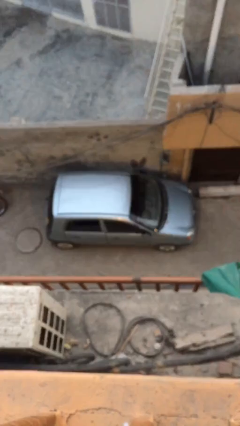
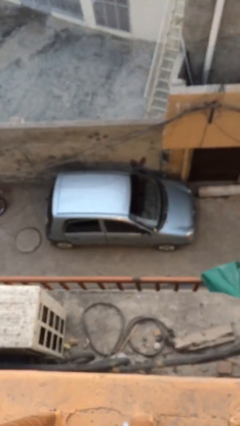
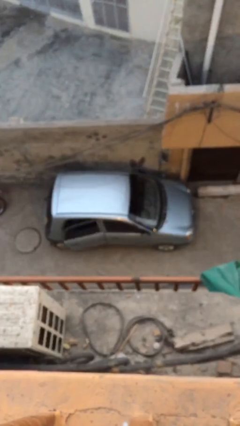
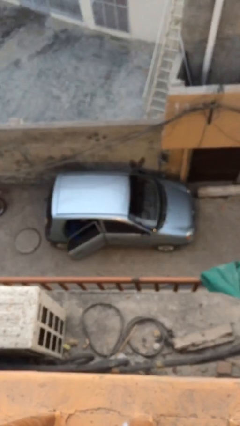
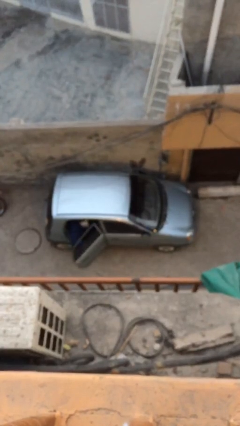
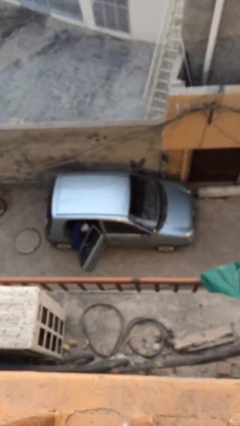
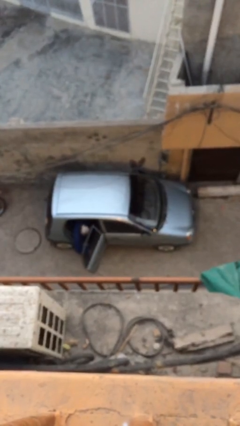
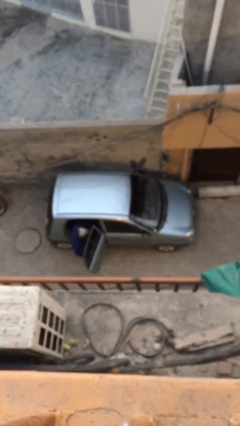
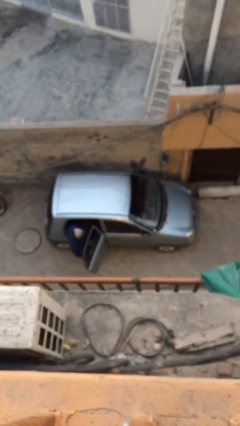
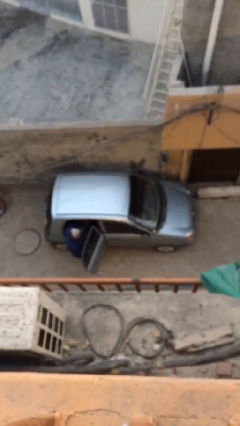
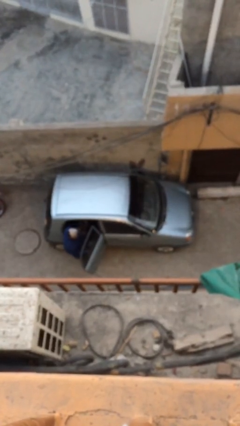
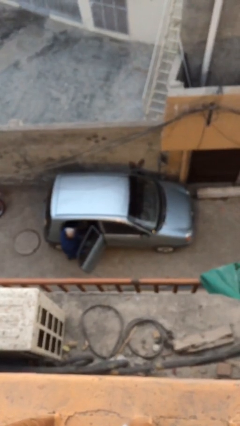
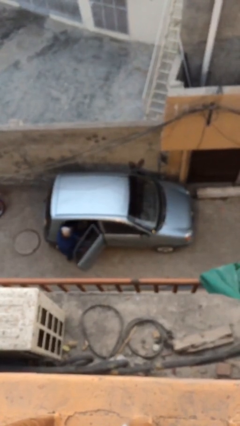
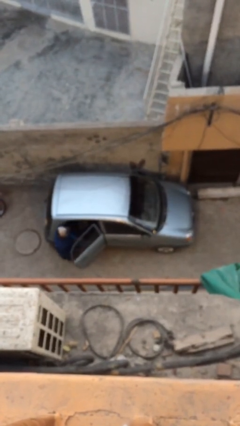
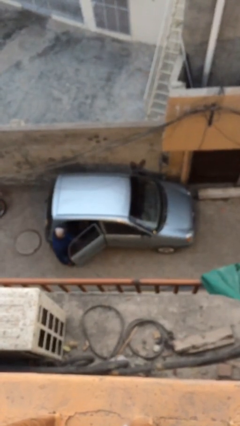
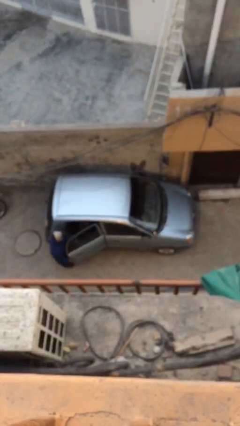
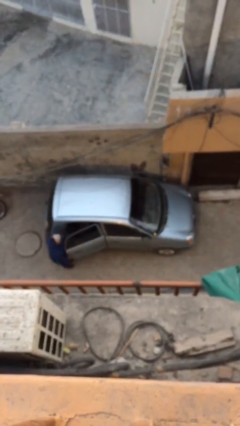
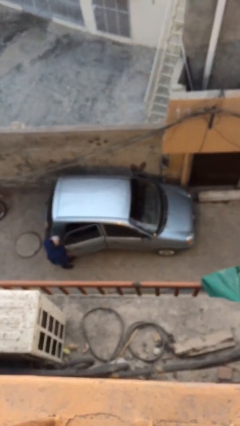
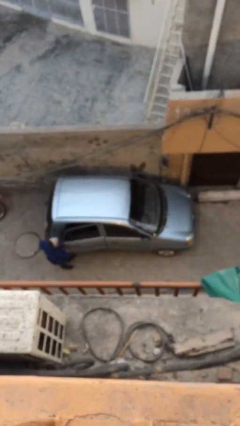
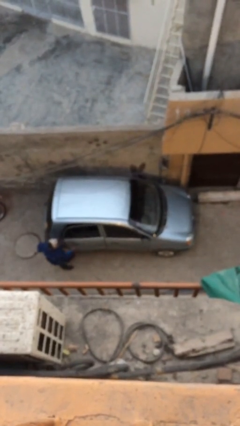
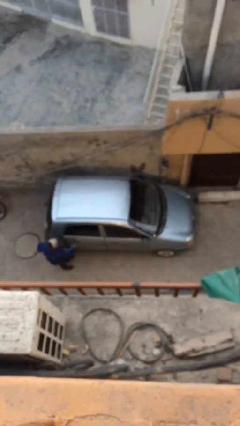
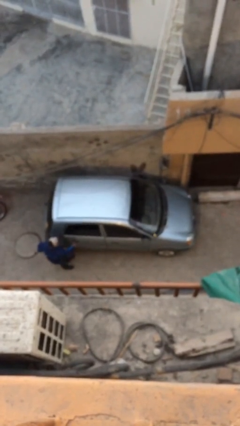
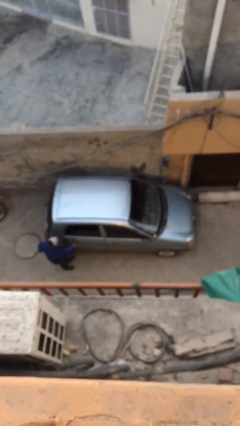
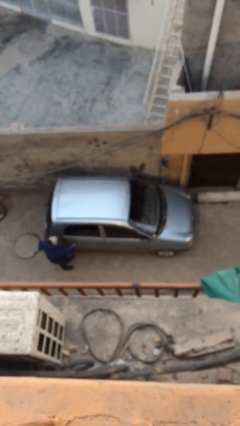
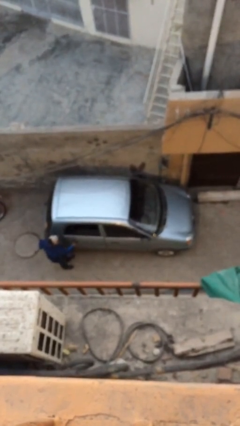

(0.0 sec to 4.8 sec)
car drops off person

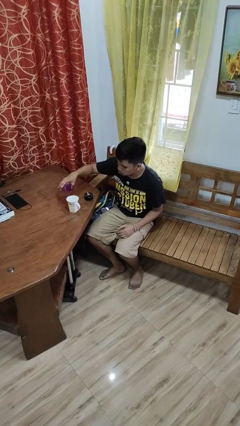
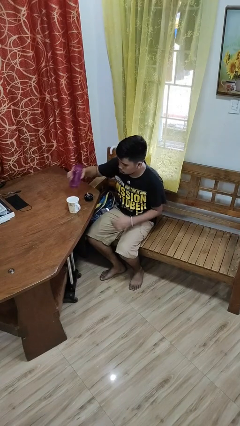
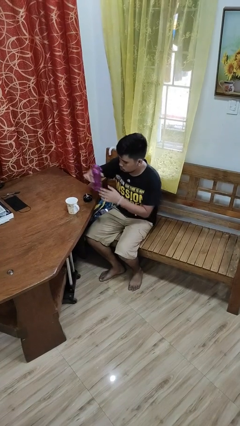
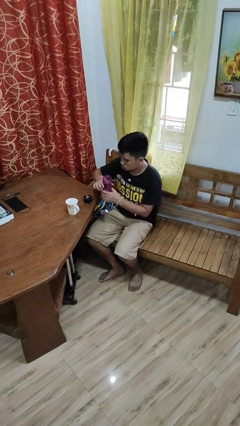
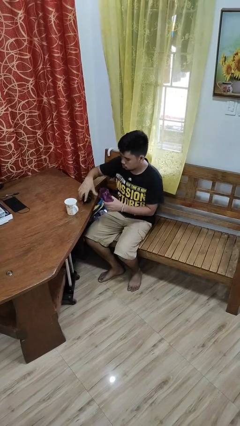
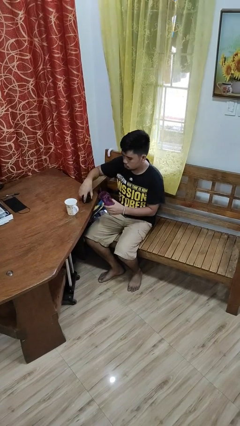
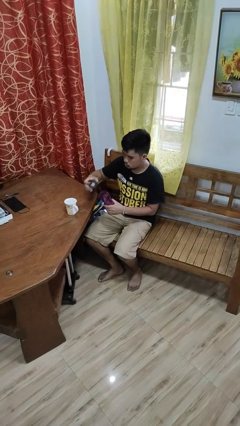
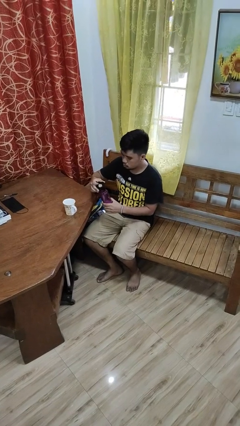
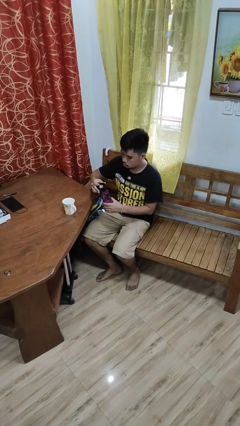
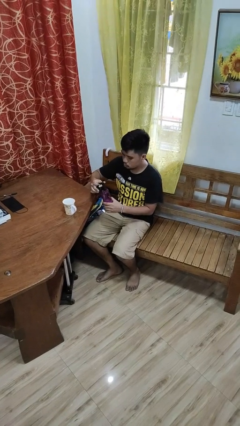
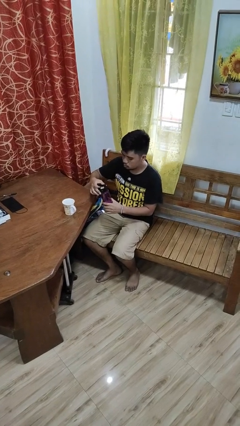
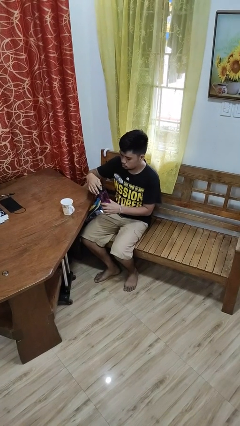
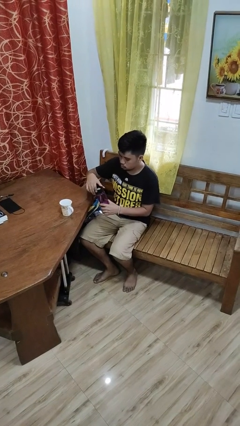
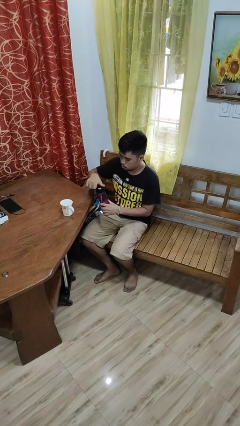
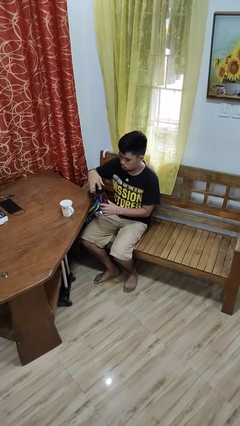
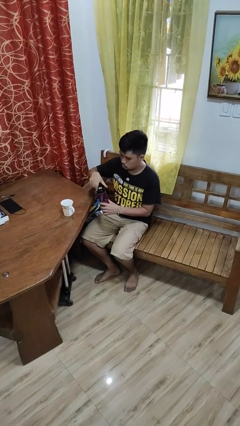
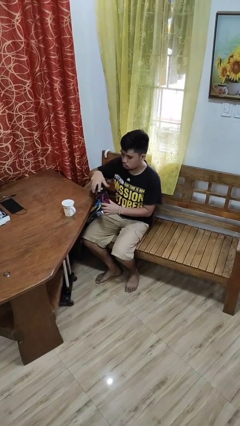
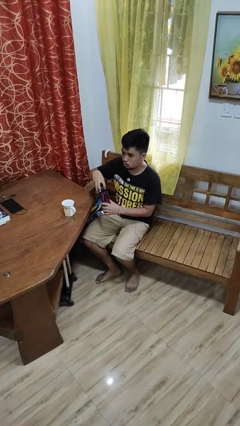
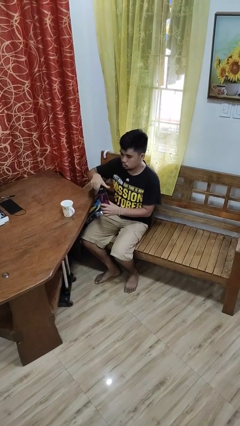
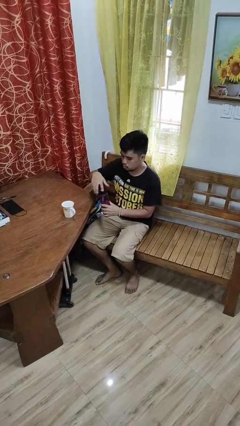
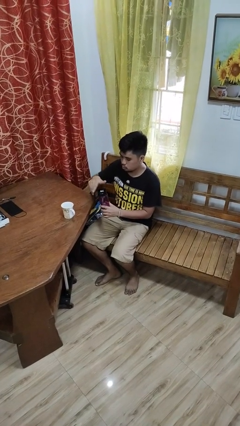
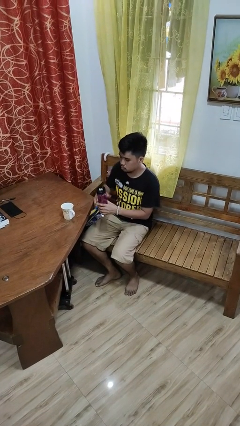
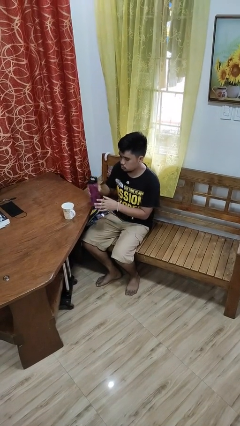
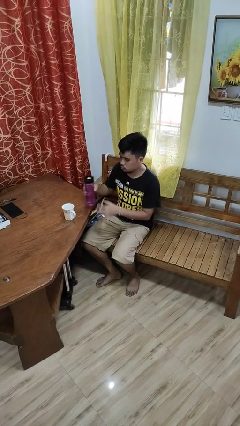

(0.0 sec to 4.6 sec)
person screws lid to bottle

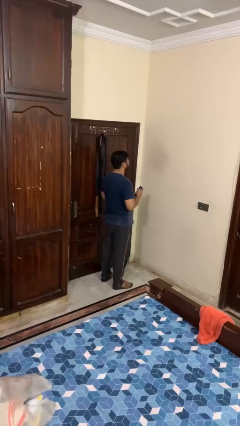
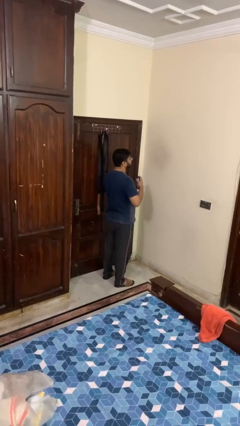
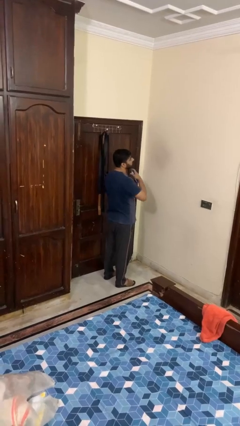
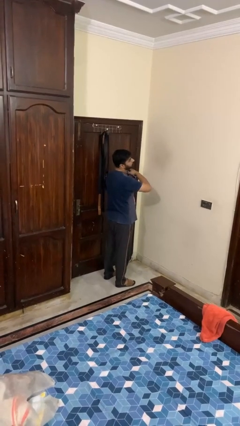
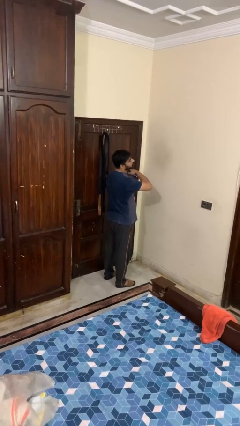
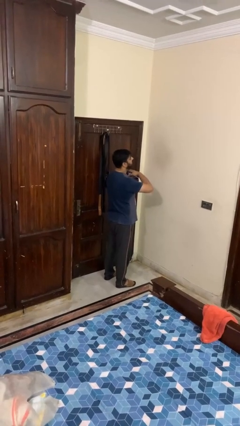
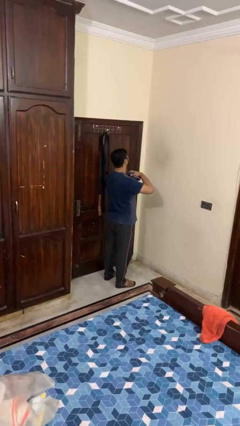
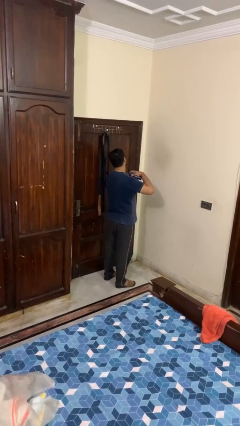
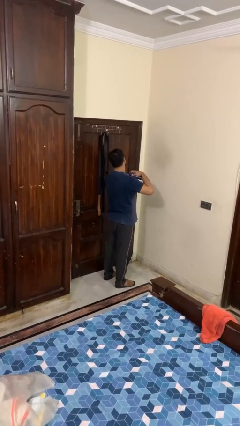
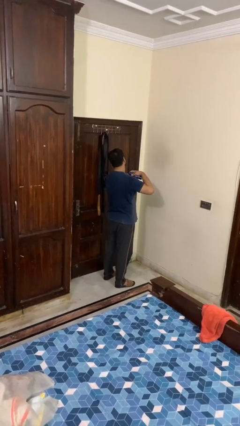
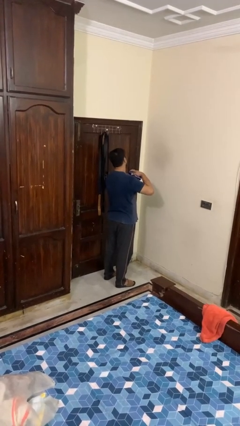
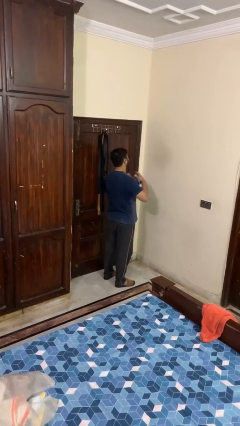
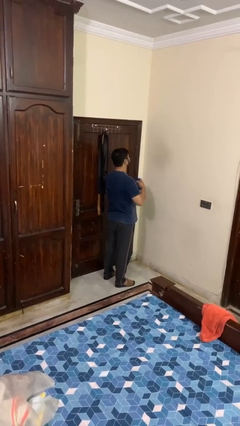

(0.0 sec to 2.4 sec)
person applies deodorant

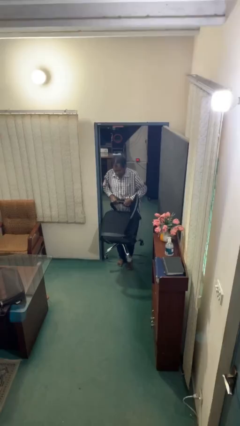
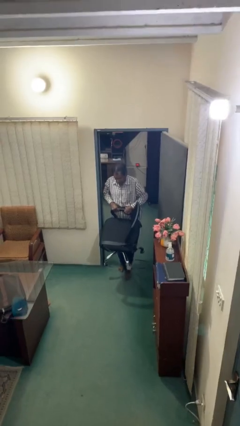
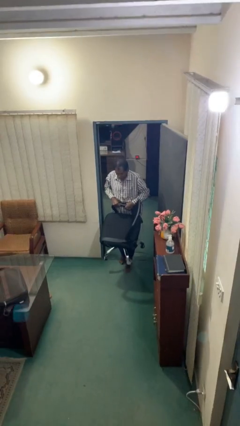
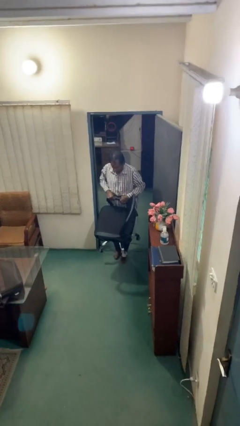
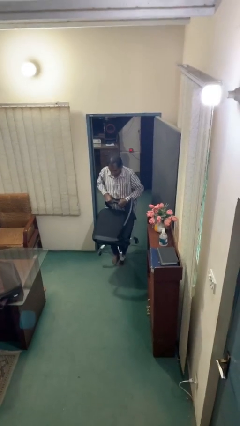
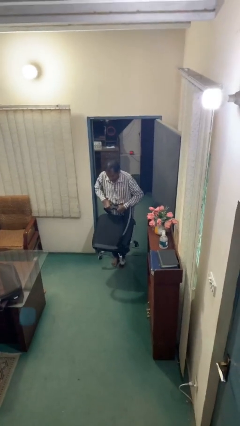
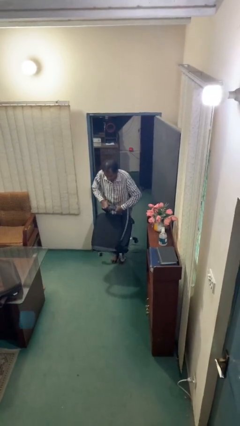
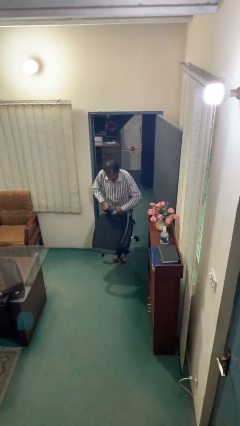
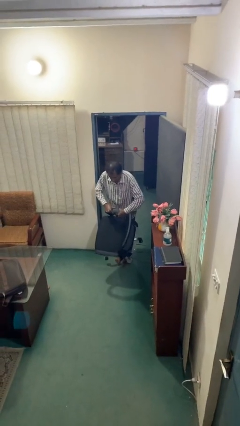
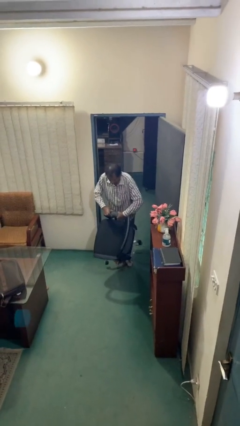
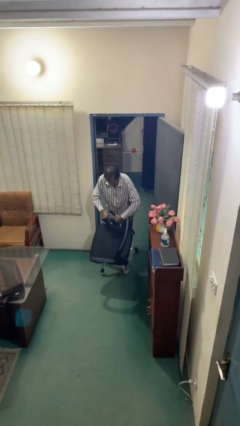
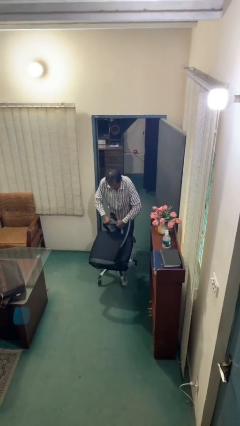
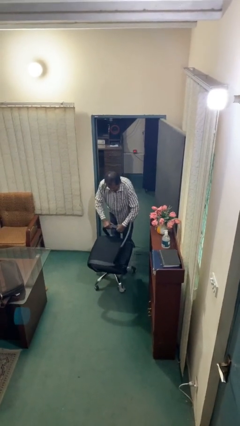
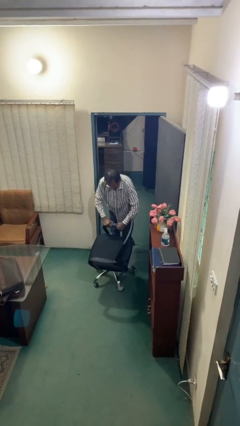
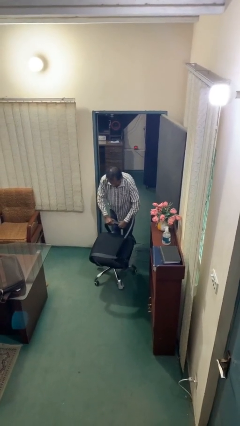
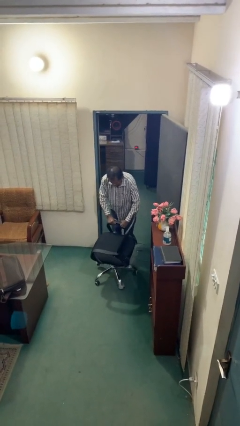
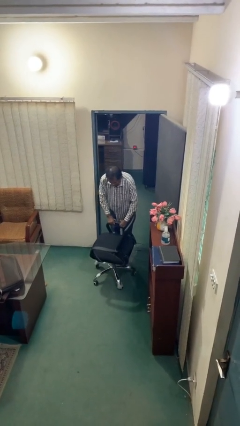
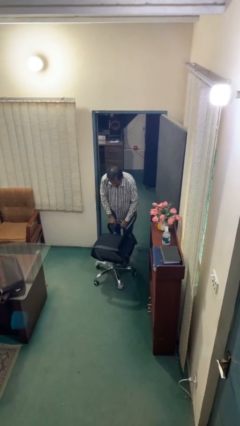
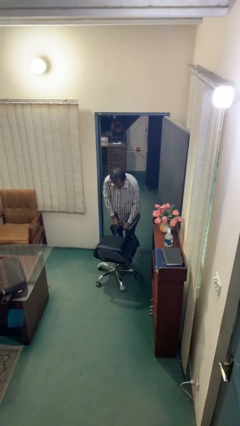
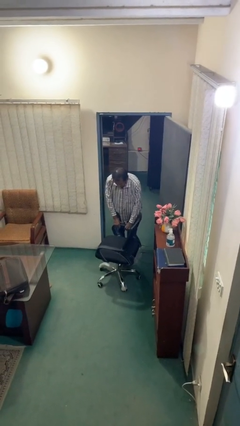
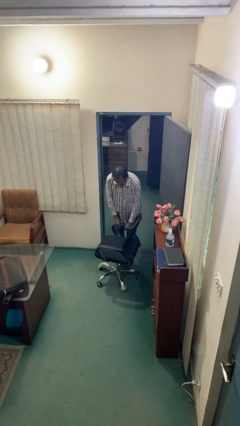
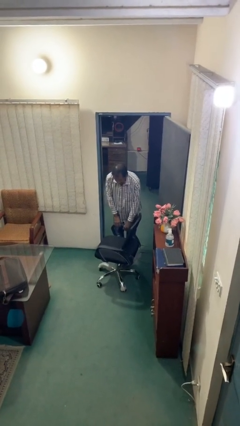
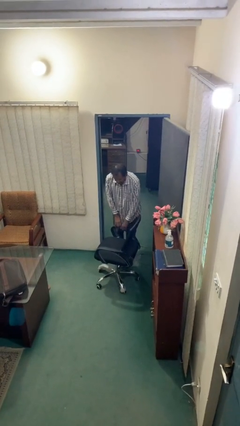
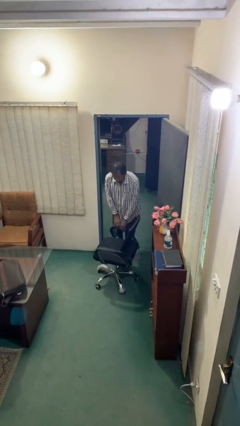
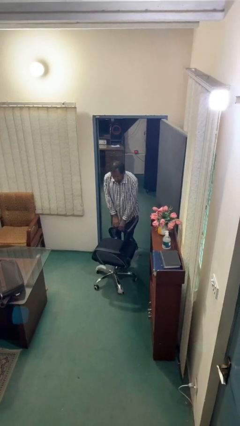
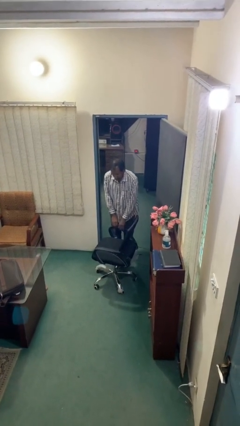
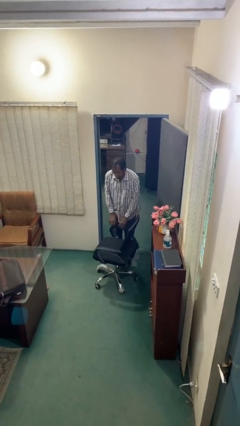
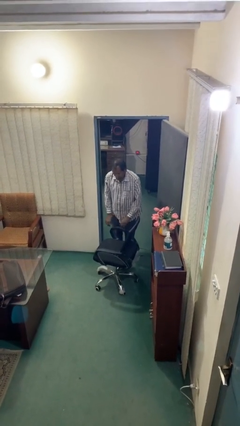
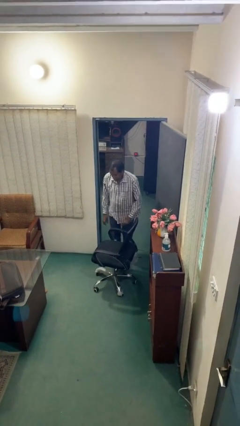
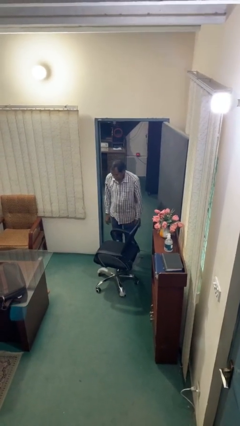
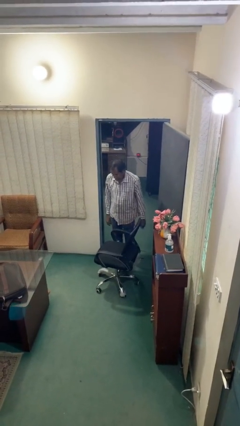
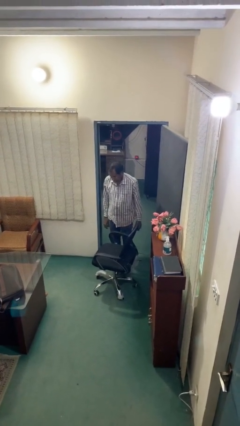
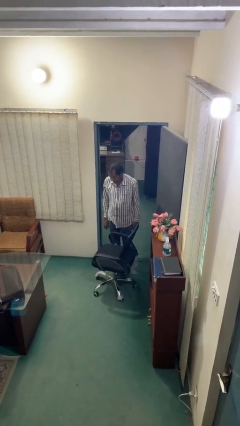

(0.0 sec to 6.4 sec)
person puts down object on floor
